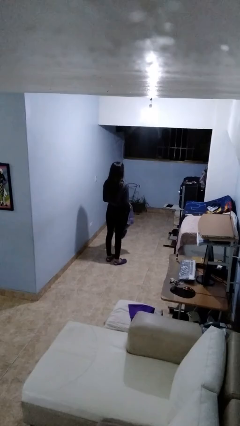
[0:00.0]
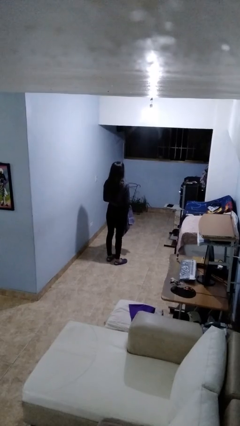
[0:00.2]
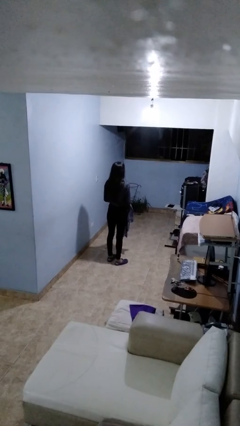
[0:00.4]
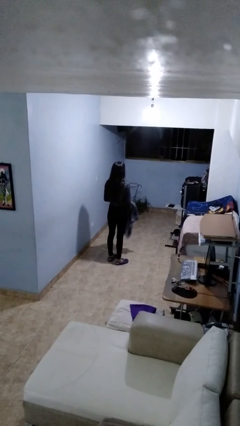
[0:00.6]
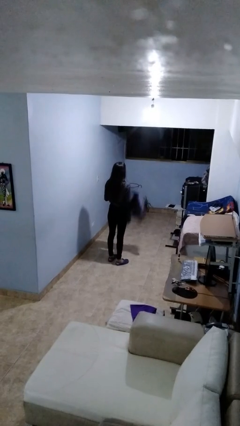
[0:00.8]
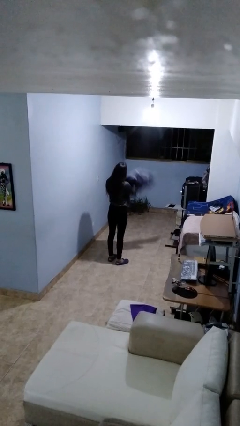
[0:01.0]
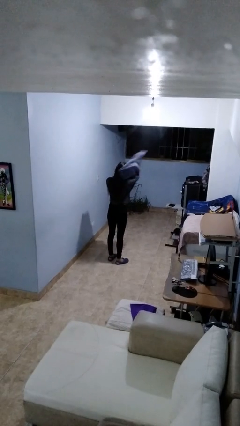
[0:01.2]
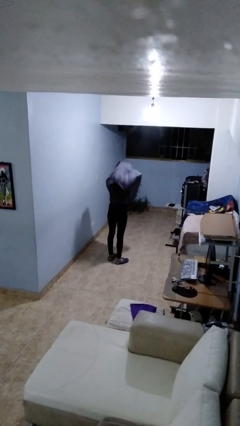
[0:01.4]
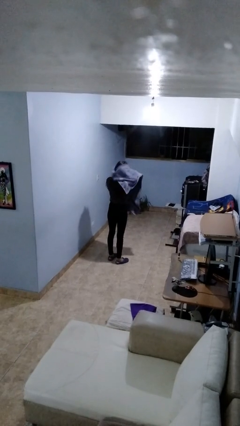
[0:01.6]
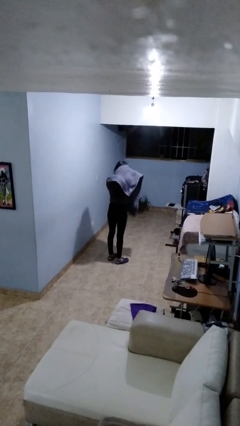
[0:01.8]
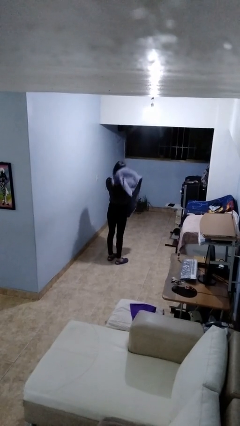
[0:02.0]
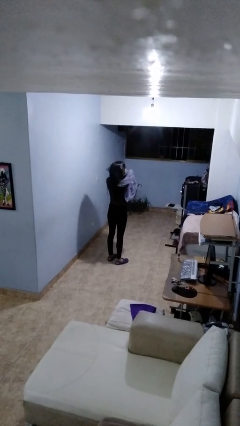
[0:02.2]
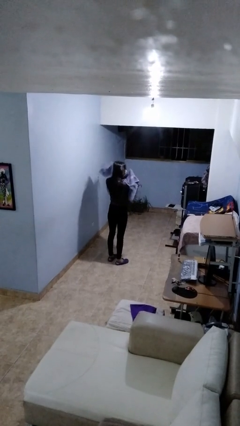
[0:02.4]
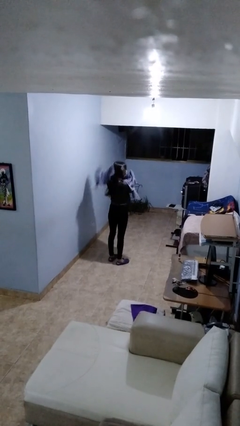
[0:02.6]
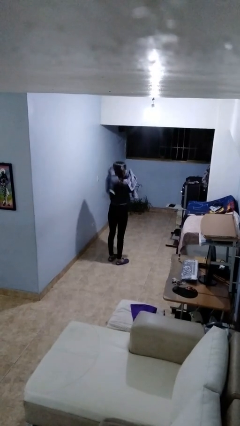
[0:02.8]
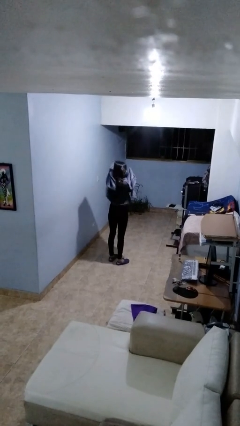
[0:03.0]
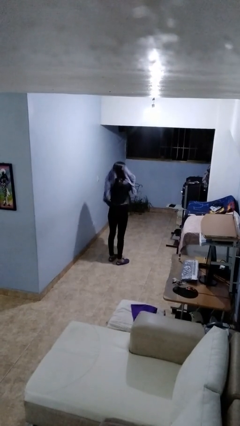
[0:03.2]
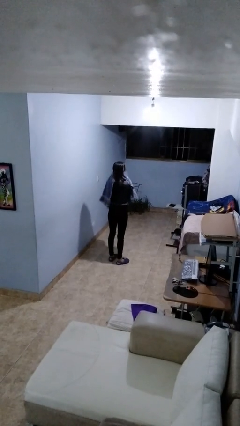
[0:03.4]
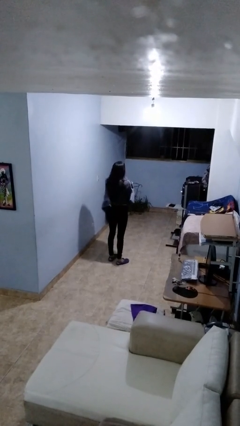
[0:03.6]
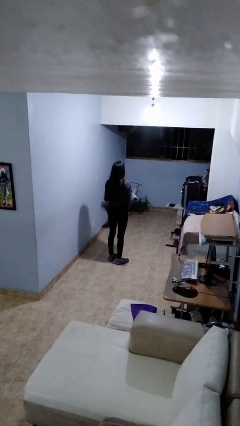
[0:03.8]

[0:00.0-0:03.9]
person dries hair with towel

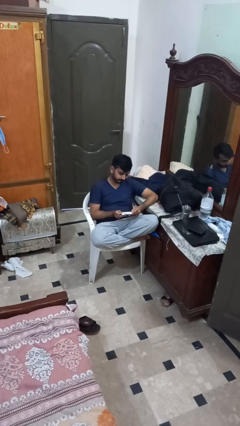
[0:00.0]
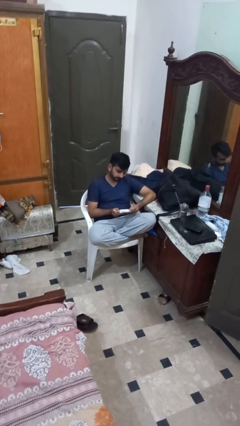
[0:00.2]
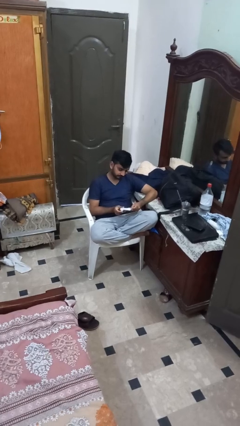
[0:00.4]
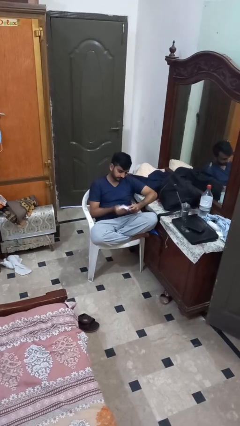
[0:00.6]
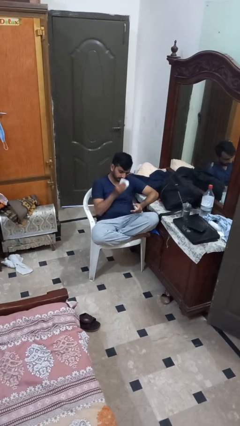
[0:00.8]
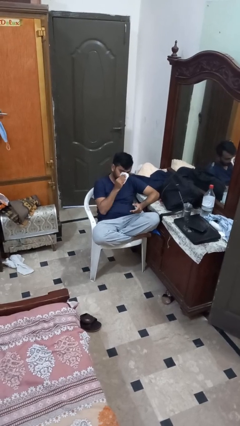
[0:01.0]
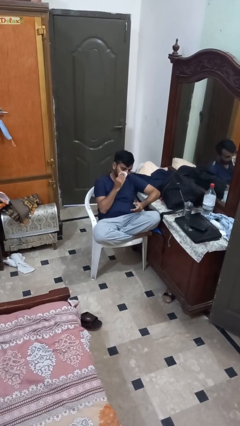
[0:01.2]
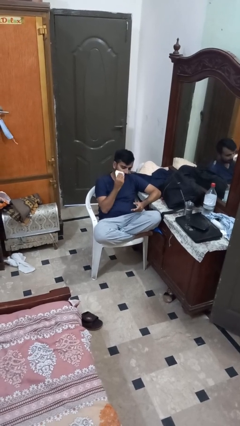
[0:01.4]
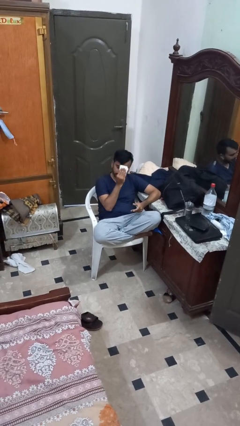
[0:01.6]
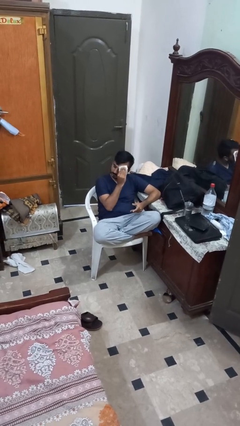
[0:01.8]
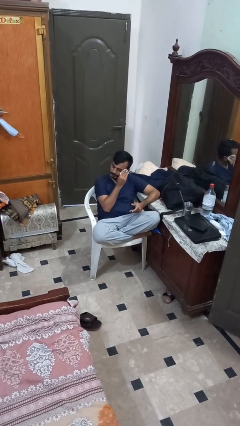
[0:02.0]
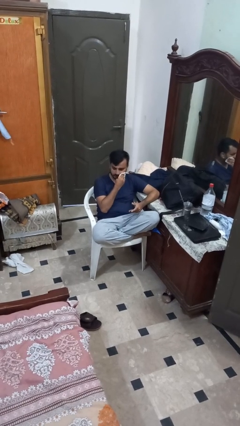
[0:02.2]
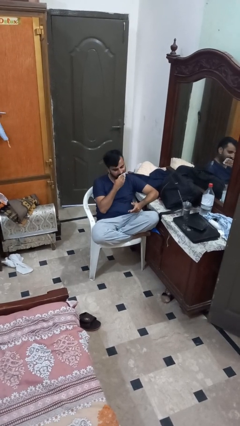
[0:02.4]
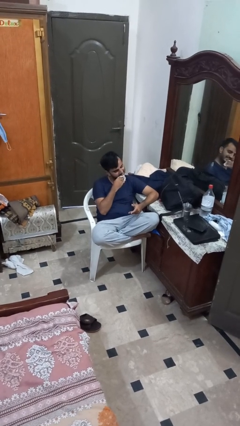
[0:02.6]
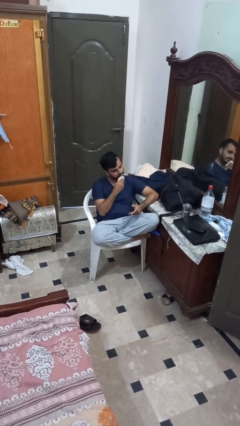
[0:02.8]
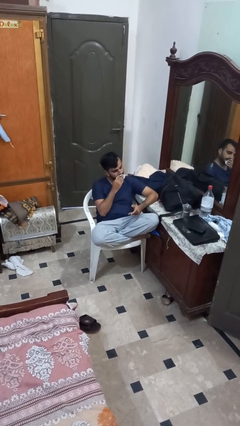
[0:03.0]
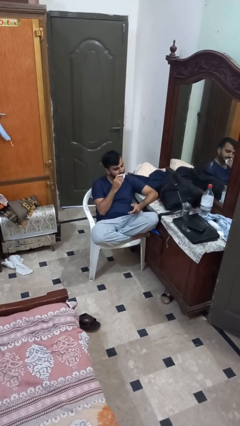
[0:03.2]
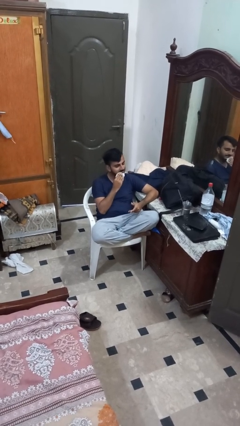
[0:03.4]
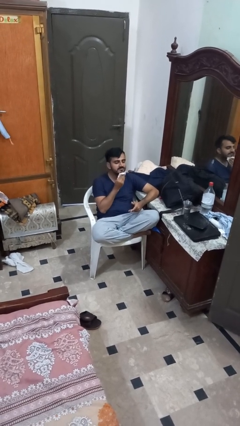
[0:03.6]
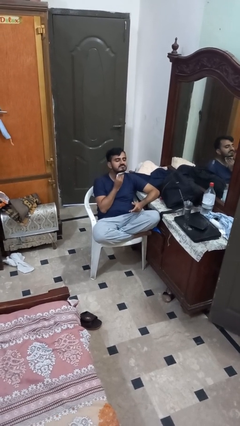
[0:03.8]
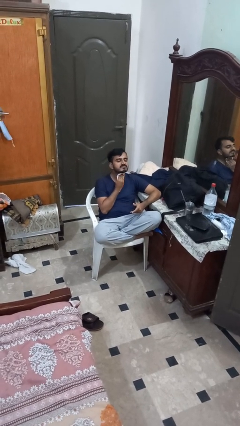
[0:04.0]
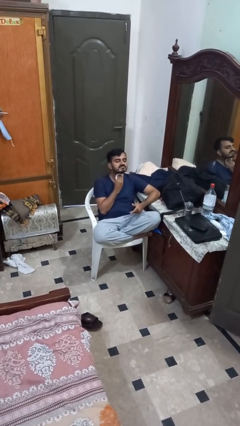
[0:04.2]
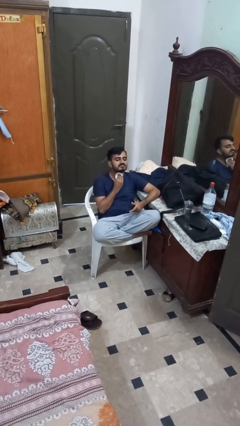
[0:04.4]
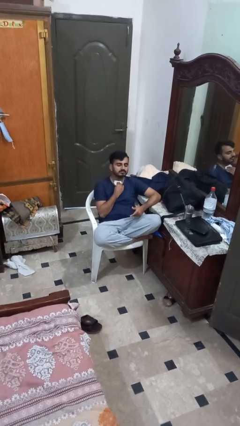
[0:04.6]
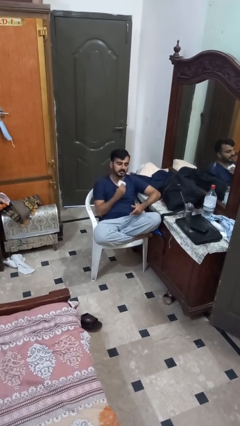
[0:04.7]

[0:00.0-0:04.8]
person wipes mouth with napkin

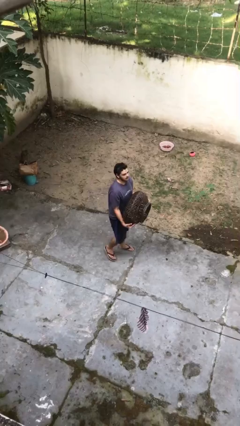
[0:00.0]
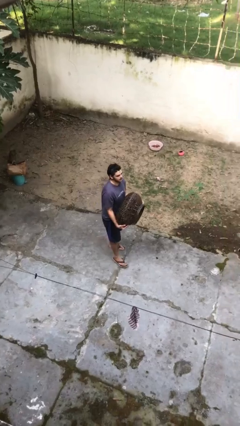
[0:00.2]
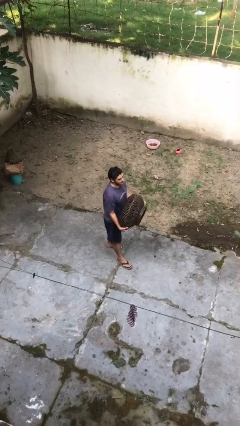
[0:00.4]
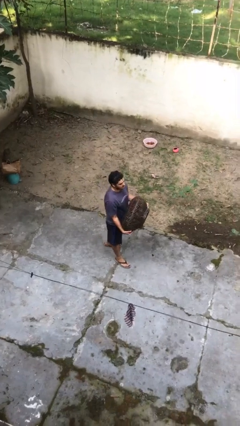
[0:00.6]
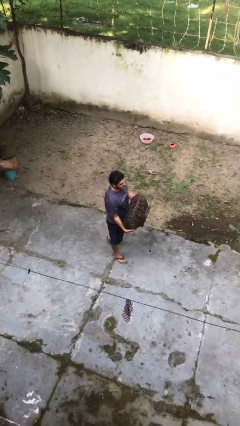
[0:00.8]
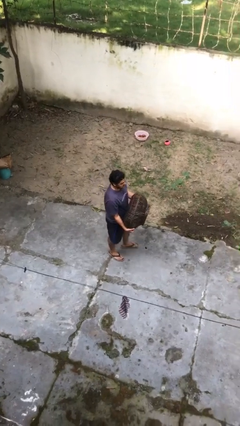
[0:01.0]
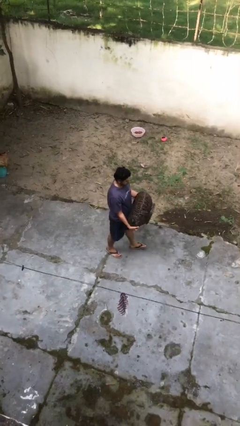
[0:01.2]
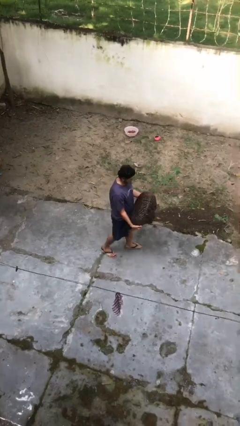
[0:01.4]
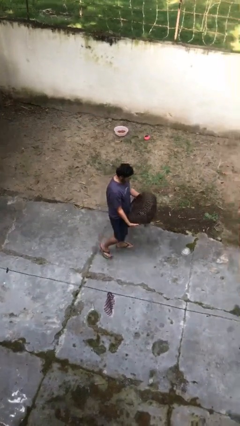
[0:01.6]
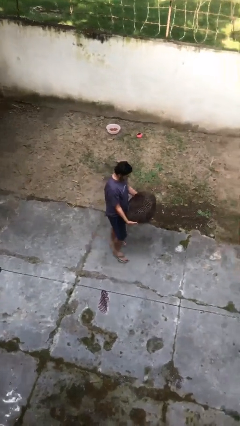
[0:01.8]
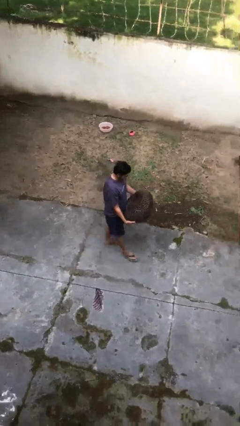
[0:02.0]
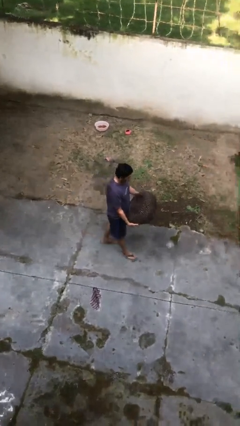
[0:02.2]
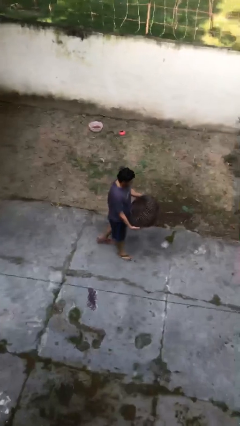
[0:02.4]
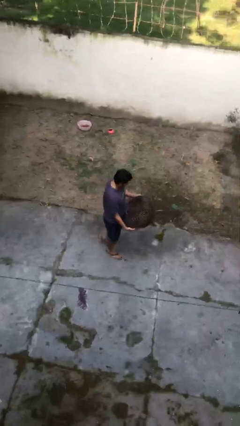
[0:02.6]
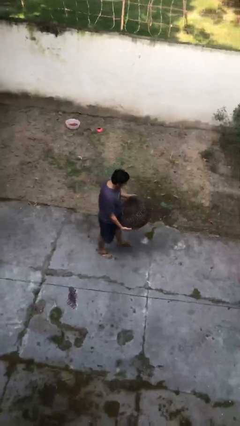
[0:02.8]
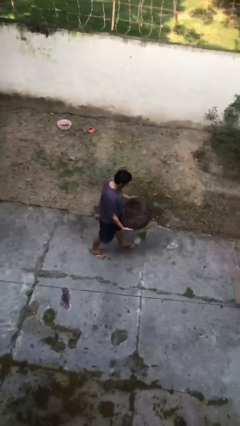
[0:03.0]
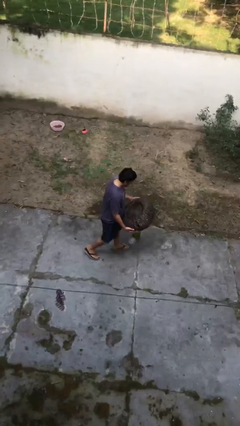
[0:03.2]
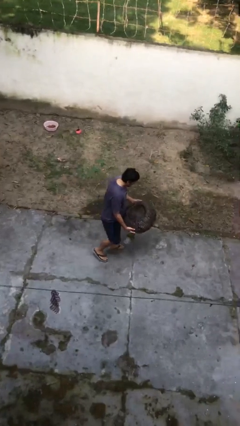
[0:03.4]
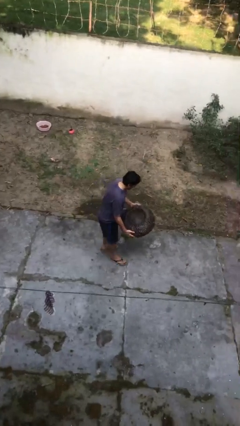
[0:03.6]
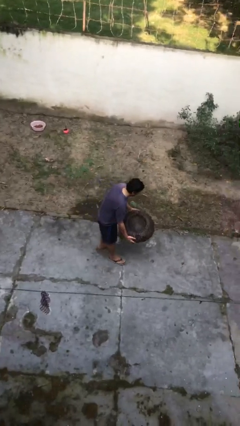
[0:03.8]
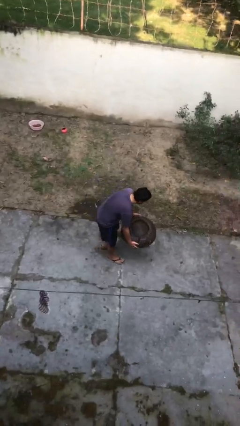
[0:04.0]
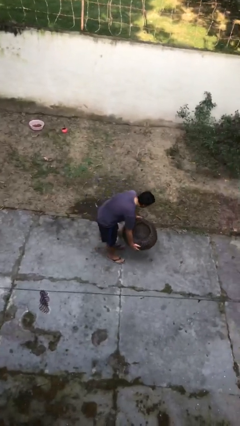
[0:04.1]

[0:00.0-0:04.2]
person carries heavy object

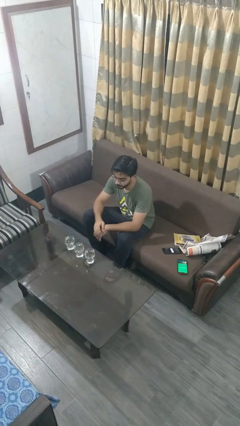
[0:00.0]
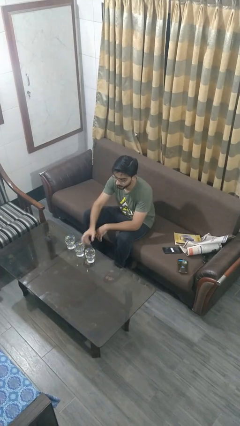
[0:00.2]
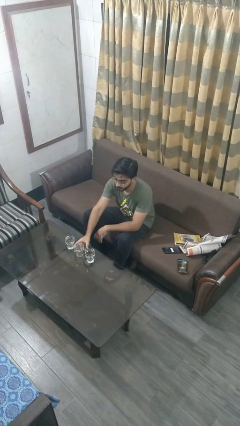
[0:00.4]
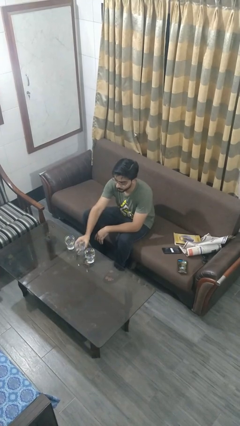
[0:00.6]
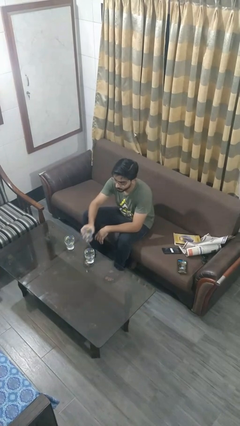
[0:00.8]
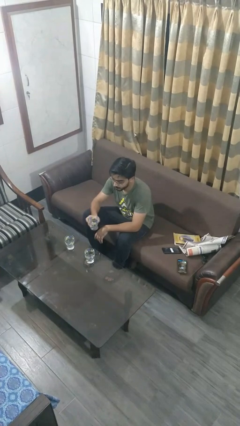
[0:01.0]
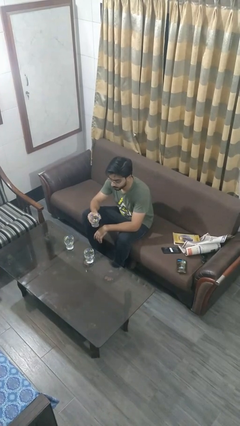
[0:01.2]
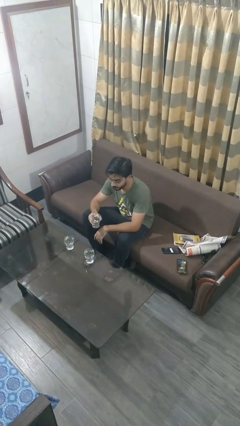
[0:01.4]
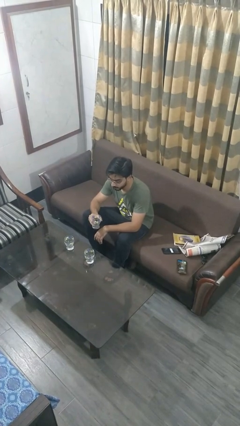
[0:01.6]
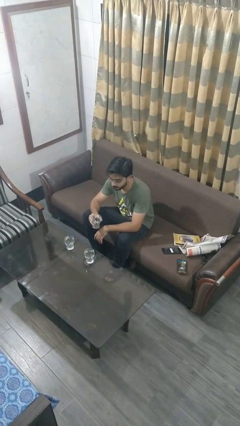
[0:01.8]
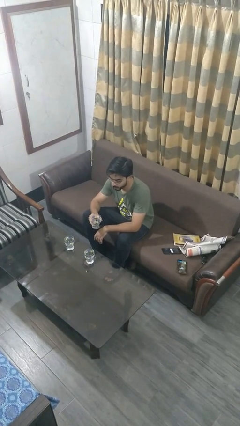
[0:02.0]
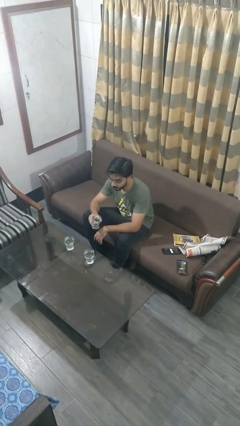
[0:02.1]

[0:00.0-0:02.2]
person picks up object from table

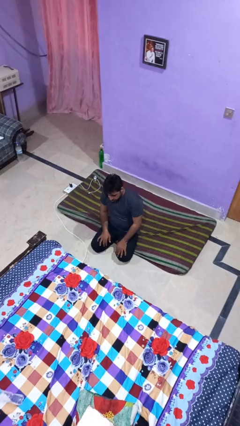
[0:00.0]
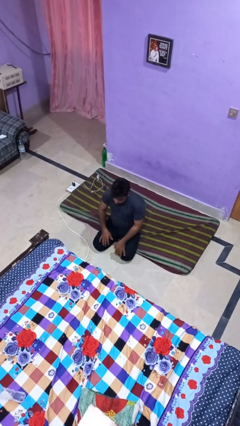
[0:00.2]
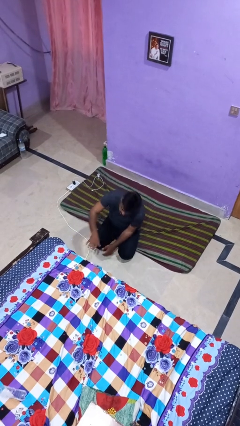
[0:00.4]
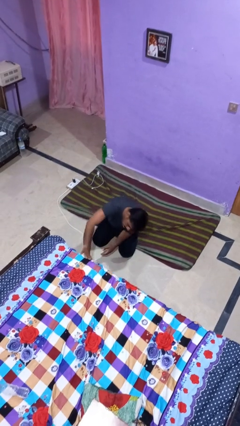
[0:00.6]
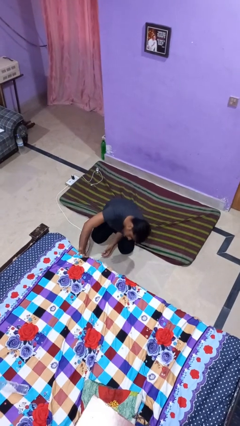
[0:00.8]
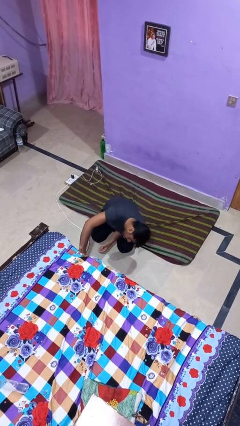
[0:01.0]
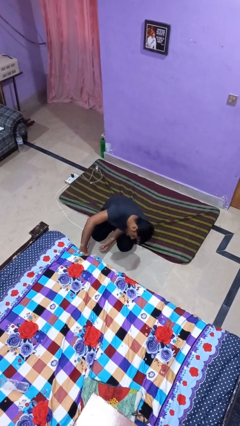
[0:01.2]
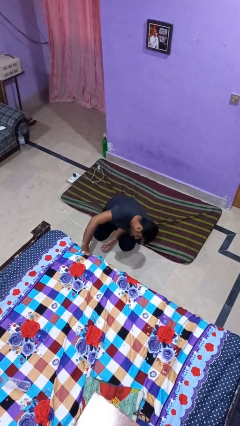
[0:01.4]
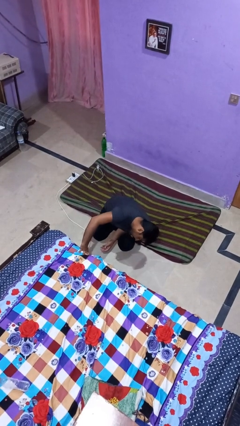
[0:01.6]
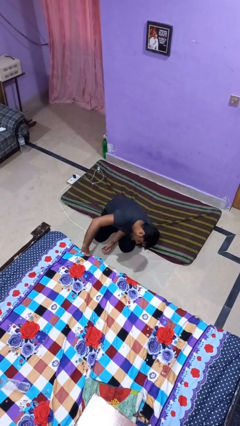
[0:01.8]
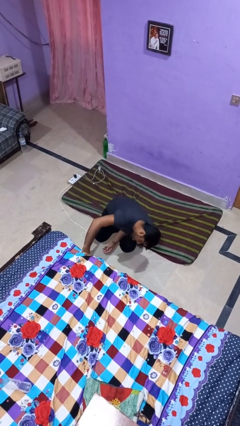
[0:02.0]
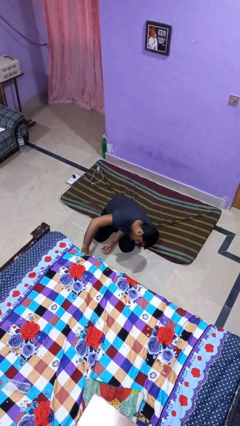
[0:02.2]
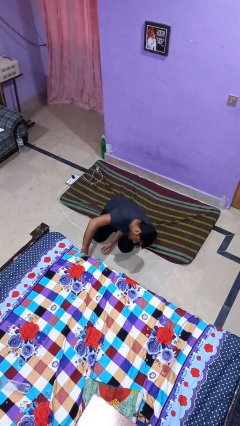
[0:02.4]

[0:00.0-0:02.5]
person searches under bed
